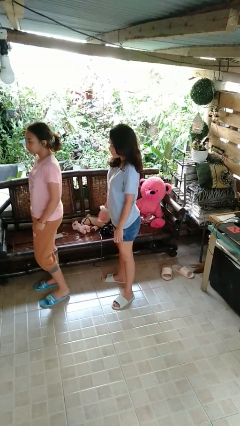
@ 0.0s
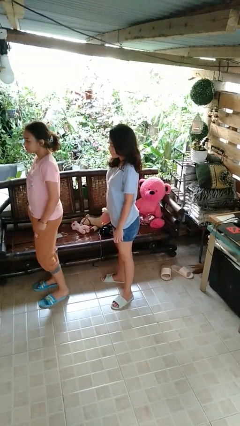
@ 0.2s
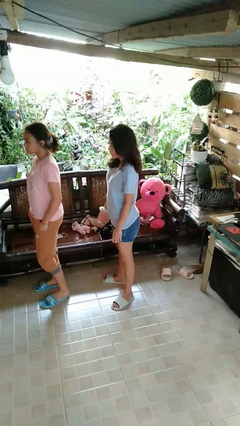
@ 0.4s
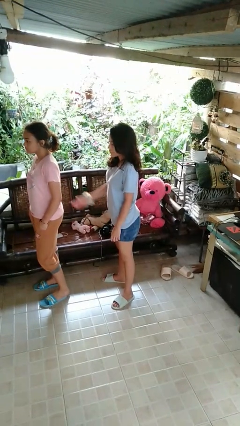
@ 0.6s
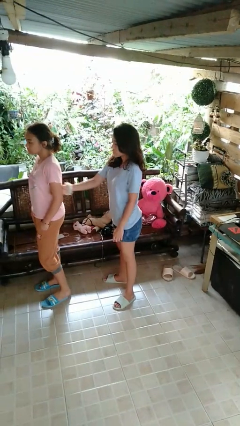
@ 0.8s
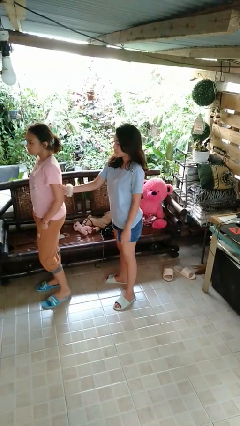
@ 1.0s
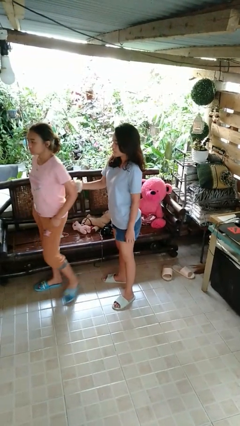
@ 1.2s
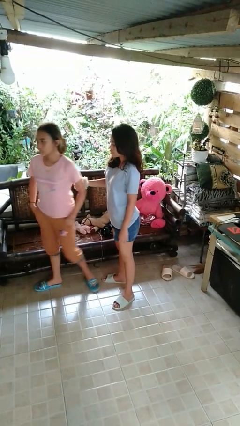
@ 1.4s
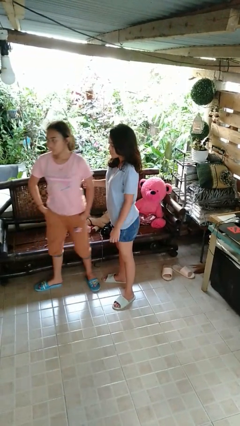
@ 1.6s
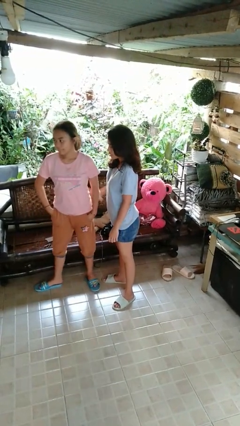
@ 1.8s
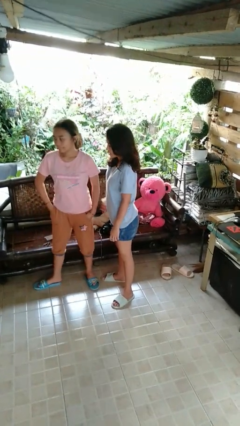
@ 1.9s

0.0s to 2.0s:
person grabs person by bicep

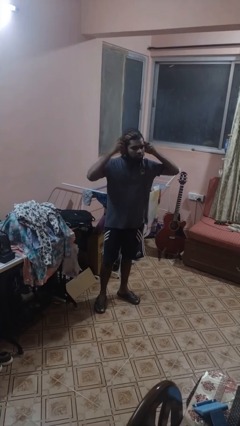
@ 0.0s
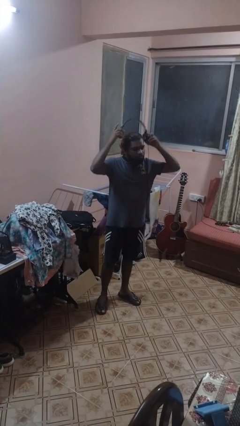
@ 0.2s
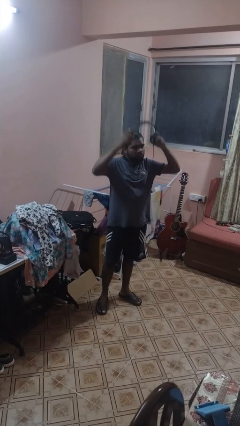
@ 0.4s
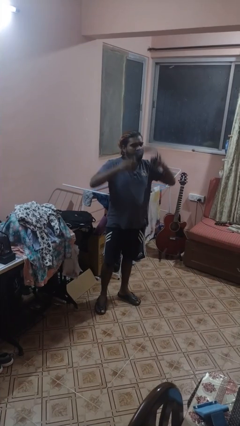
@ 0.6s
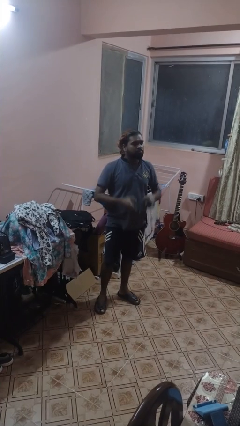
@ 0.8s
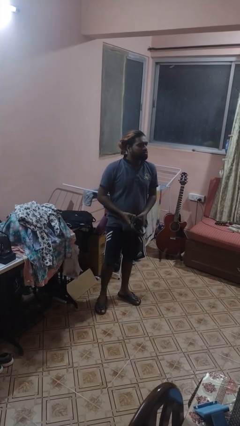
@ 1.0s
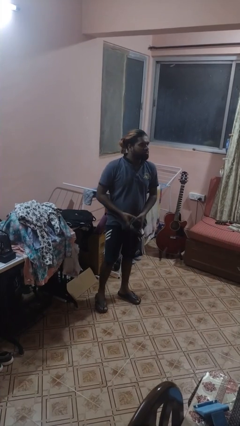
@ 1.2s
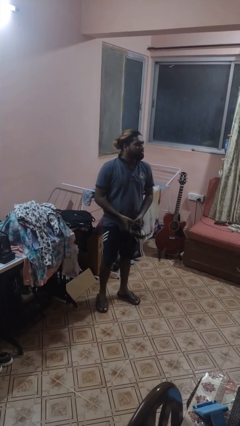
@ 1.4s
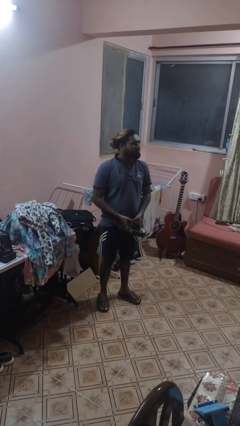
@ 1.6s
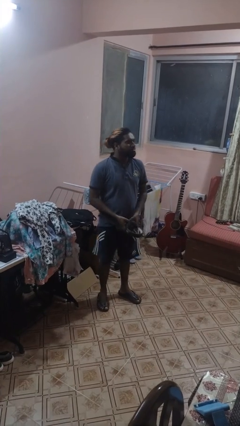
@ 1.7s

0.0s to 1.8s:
person takes off headphones

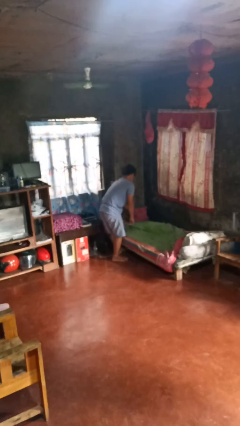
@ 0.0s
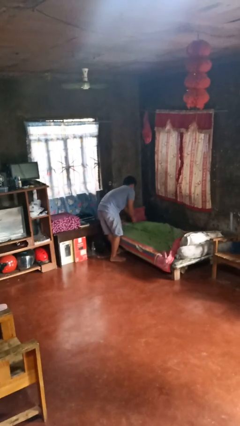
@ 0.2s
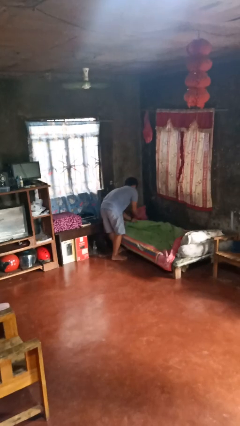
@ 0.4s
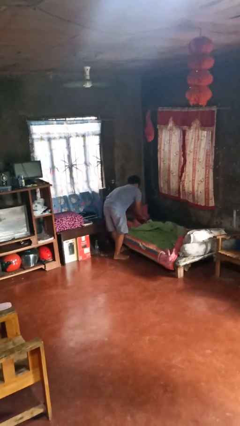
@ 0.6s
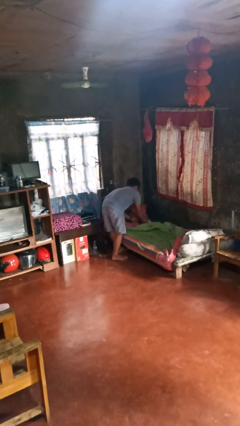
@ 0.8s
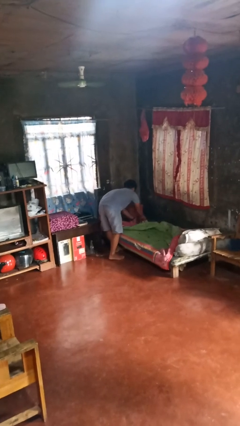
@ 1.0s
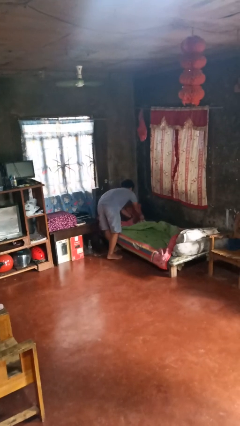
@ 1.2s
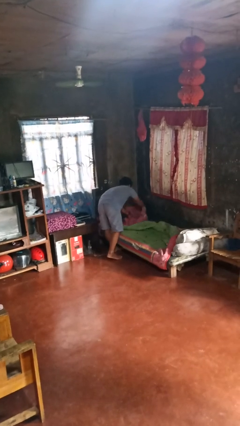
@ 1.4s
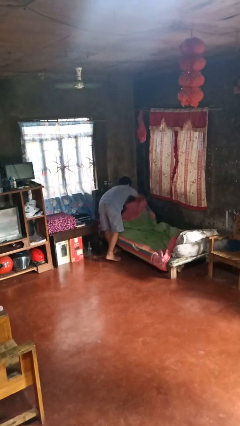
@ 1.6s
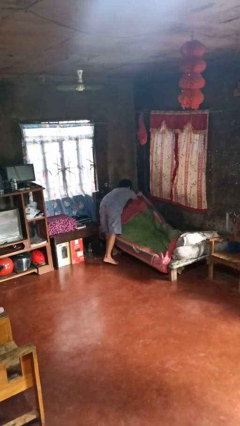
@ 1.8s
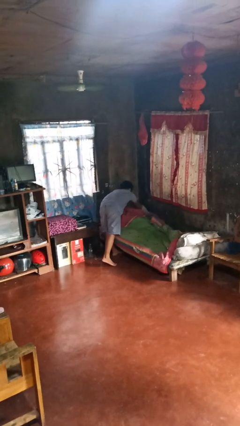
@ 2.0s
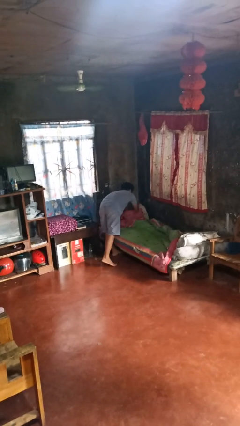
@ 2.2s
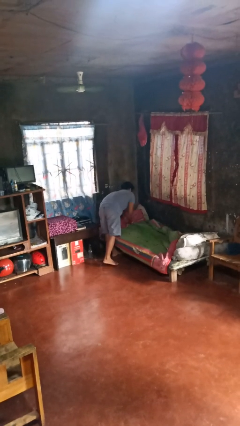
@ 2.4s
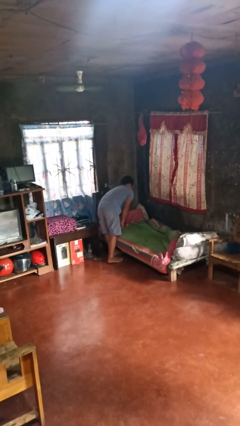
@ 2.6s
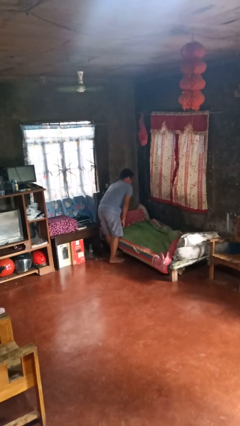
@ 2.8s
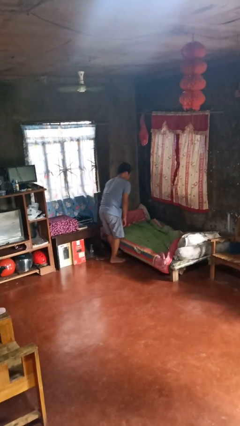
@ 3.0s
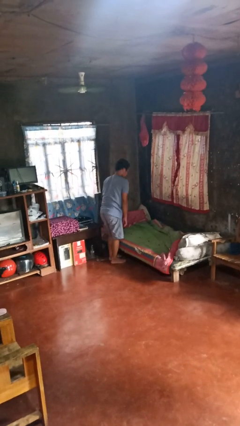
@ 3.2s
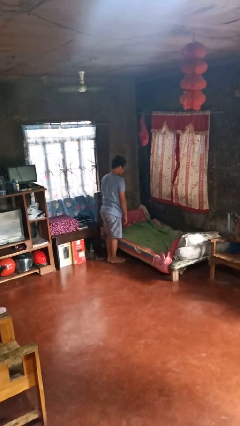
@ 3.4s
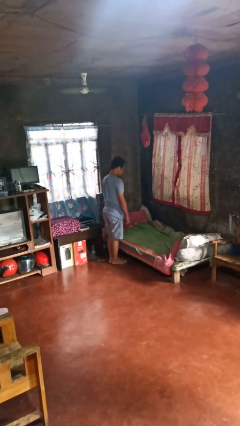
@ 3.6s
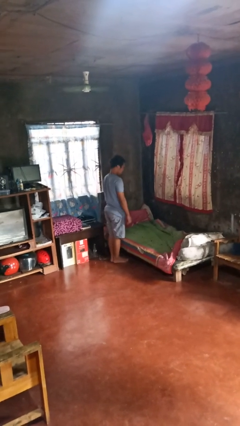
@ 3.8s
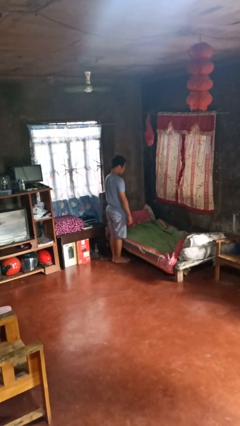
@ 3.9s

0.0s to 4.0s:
person makes bed

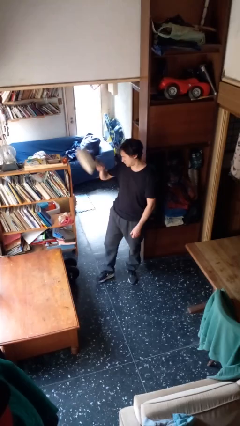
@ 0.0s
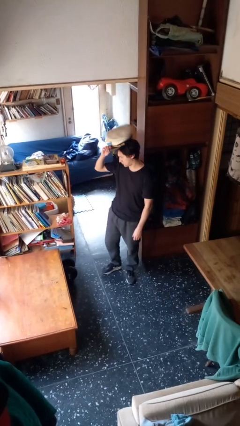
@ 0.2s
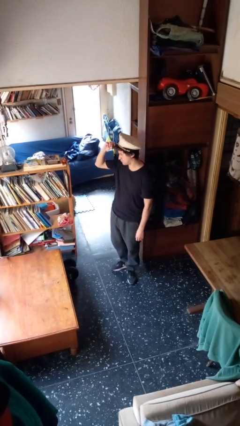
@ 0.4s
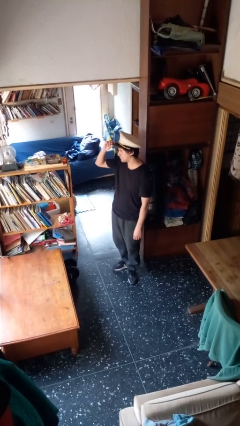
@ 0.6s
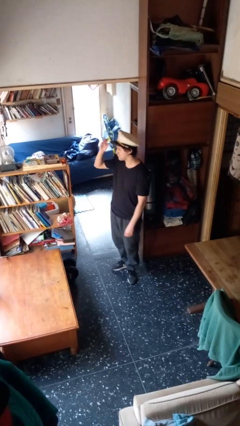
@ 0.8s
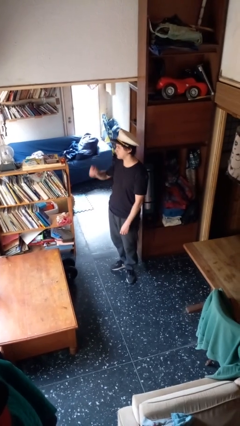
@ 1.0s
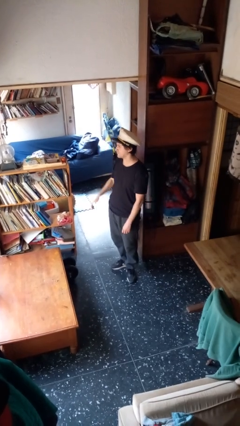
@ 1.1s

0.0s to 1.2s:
person puts on hat

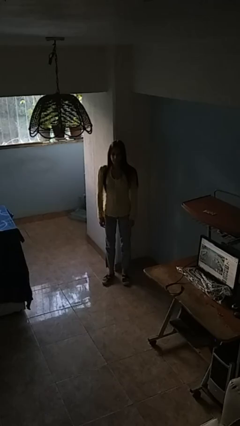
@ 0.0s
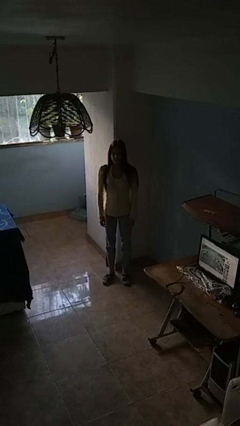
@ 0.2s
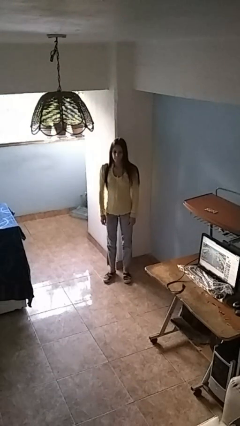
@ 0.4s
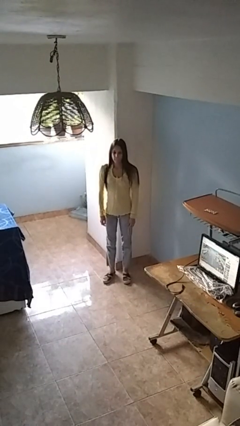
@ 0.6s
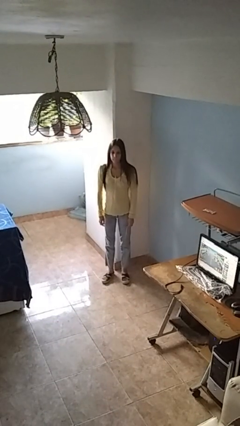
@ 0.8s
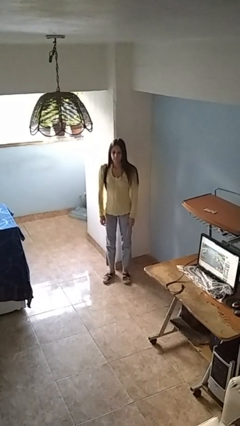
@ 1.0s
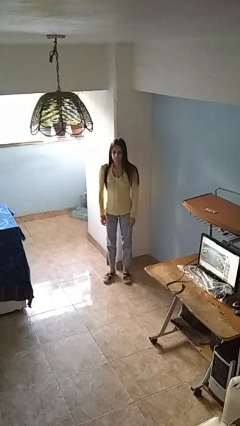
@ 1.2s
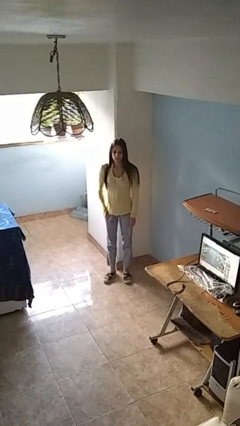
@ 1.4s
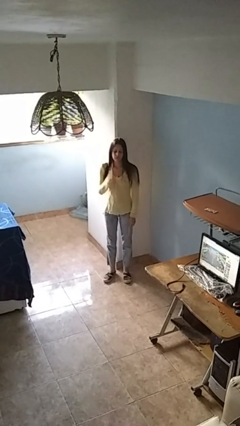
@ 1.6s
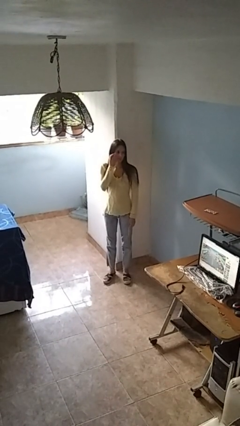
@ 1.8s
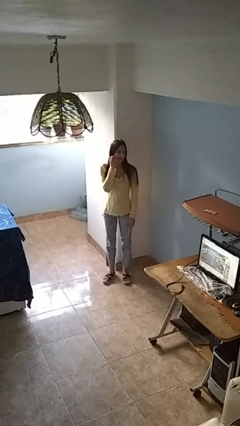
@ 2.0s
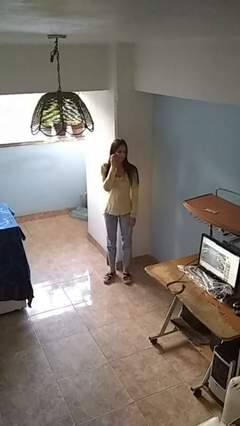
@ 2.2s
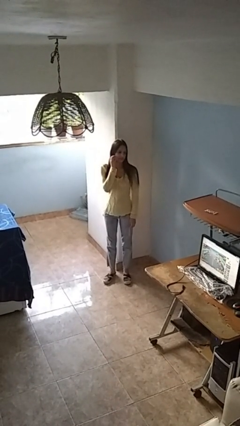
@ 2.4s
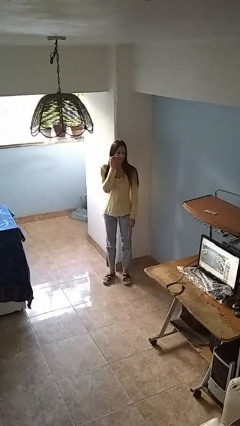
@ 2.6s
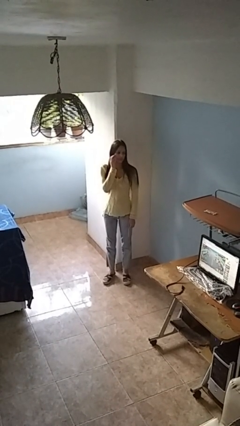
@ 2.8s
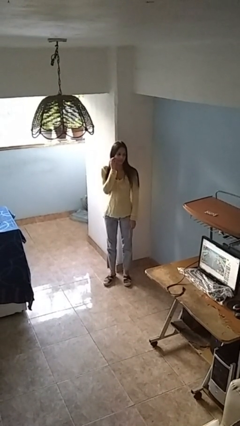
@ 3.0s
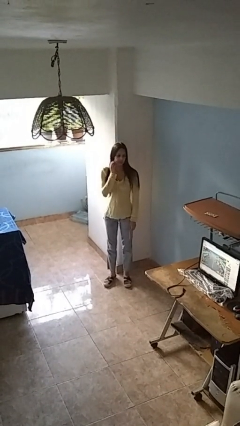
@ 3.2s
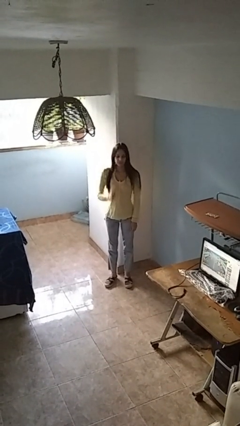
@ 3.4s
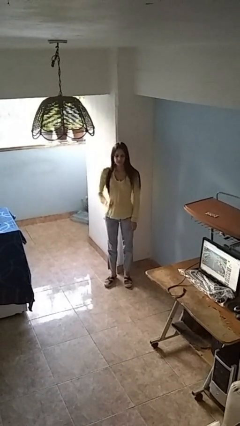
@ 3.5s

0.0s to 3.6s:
person scratches face

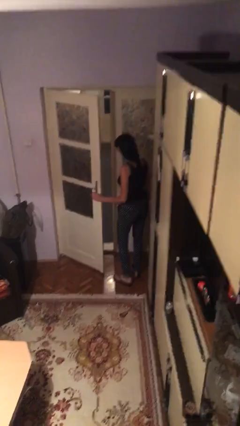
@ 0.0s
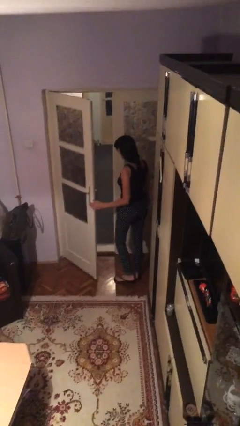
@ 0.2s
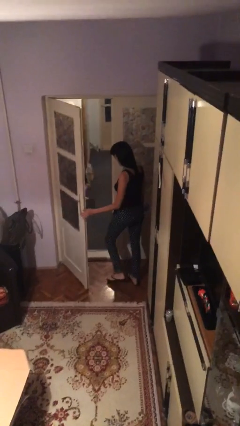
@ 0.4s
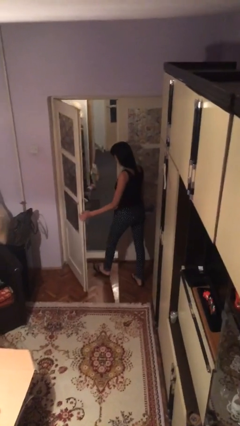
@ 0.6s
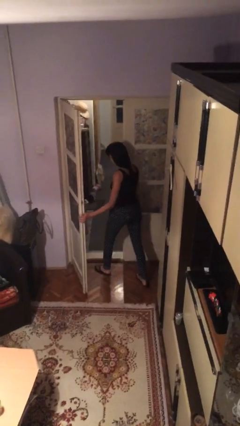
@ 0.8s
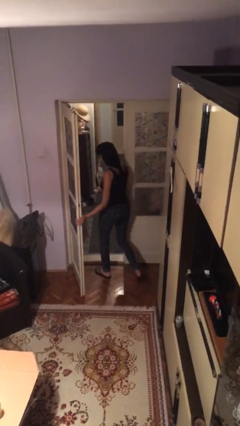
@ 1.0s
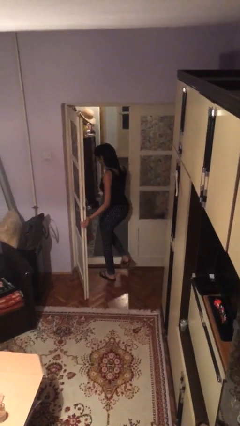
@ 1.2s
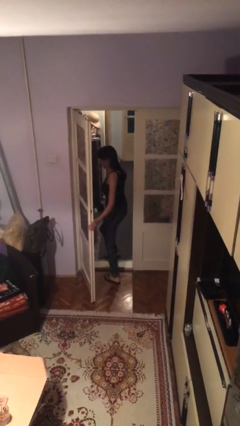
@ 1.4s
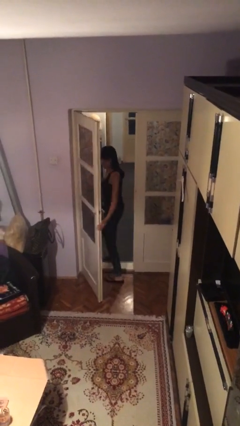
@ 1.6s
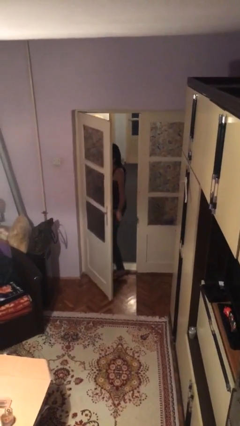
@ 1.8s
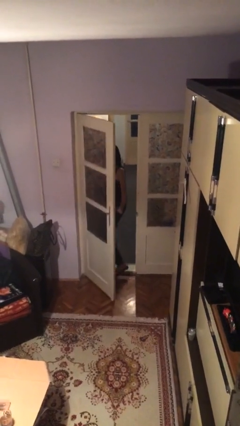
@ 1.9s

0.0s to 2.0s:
person enters scene through structure

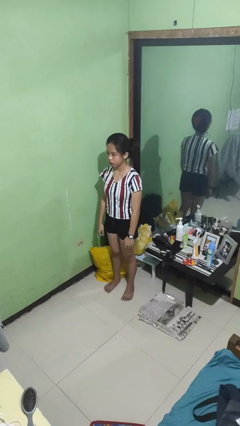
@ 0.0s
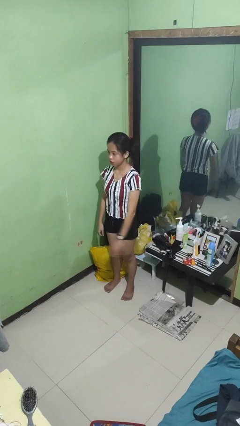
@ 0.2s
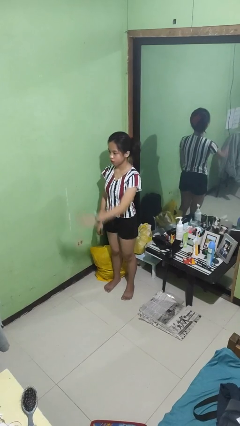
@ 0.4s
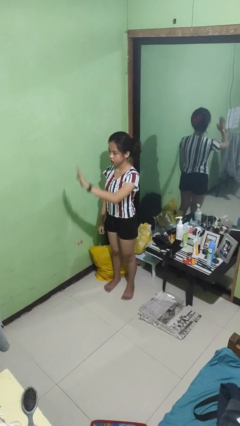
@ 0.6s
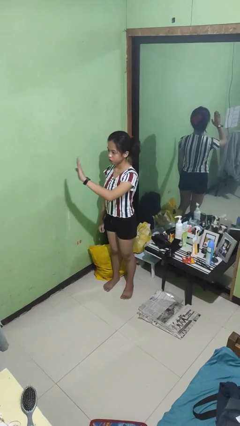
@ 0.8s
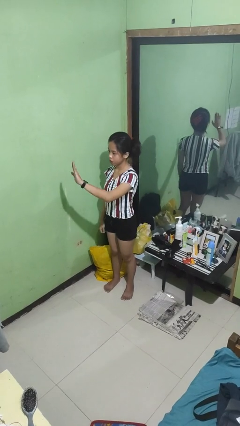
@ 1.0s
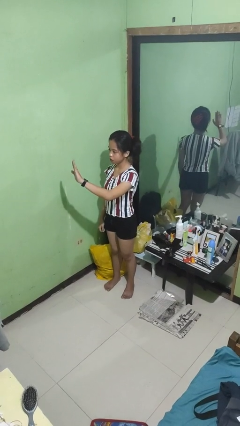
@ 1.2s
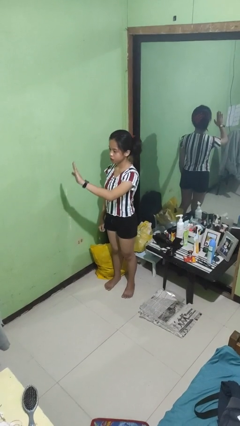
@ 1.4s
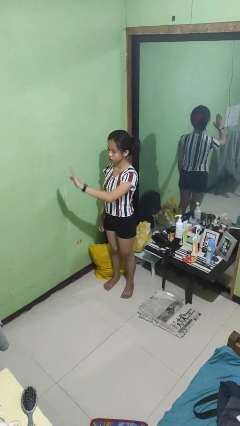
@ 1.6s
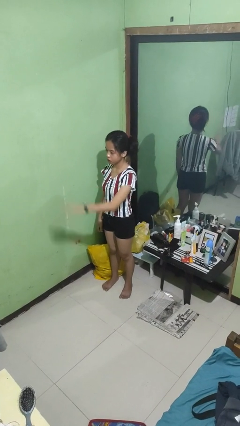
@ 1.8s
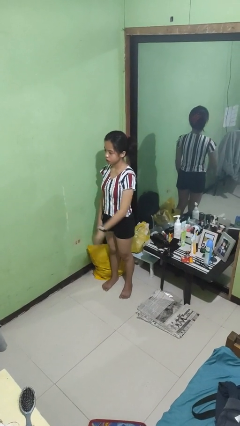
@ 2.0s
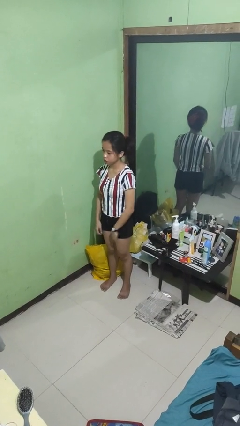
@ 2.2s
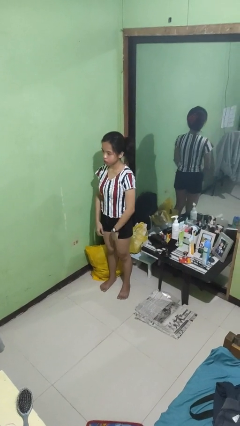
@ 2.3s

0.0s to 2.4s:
person gestures stop
